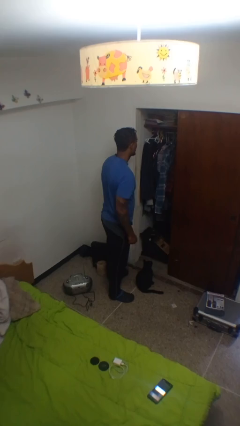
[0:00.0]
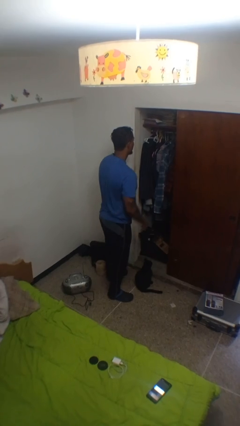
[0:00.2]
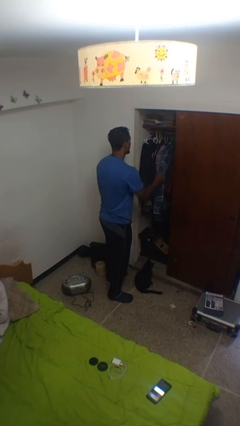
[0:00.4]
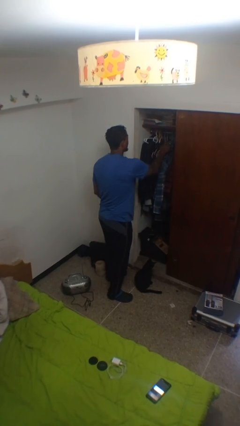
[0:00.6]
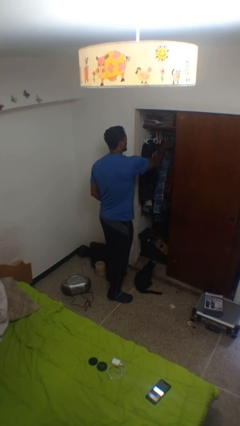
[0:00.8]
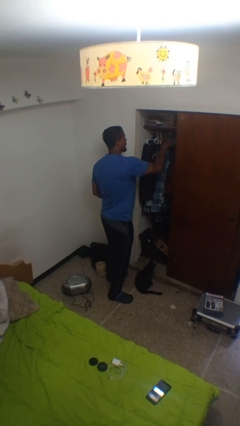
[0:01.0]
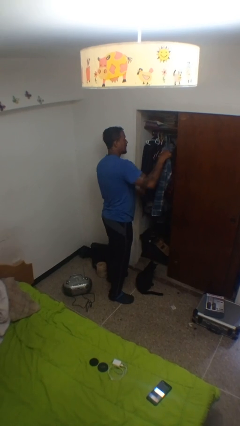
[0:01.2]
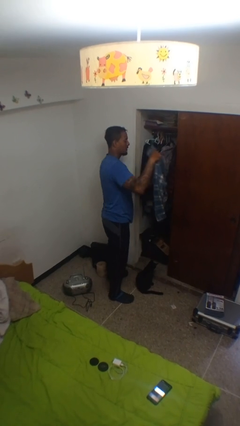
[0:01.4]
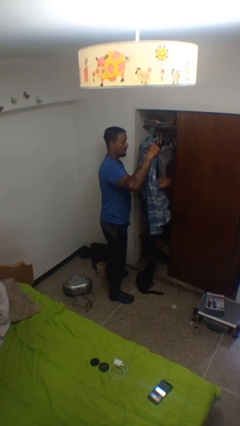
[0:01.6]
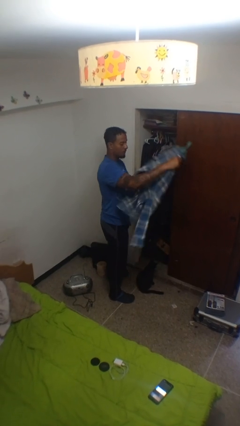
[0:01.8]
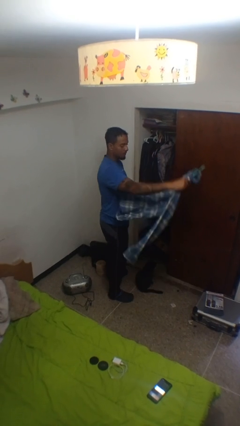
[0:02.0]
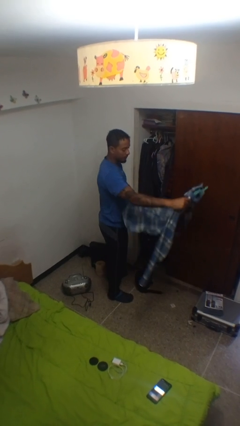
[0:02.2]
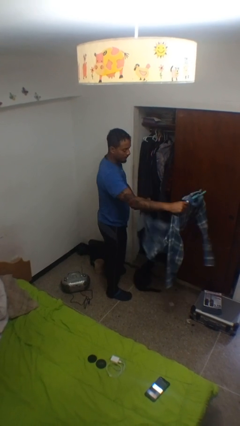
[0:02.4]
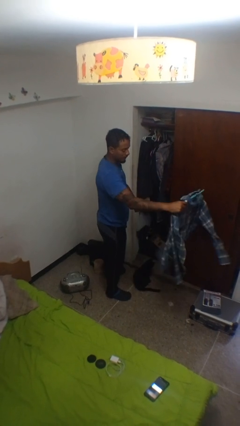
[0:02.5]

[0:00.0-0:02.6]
person takes clothes from closet

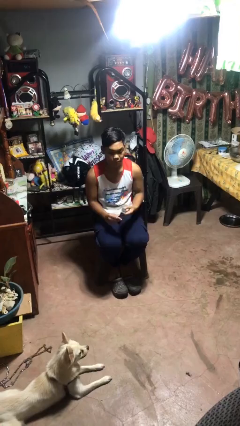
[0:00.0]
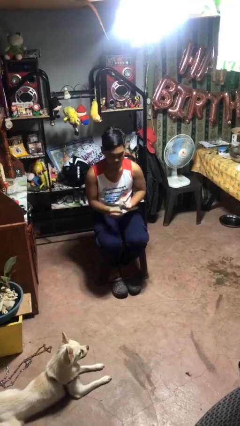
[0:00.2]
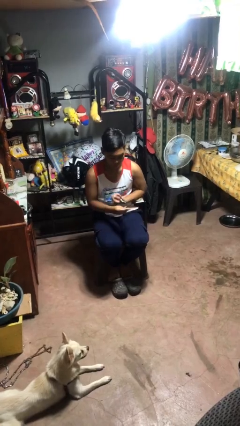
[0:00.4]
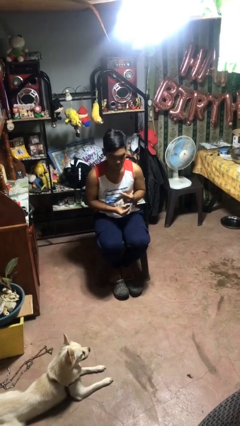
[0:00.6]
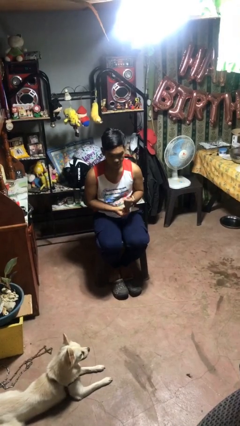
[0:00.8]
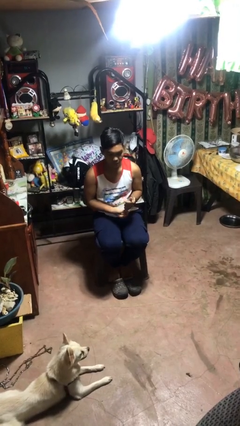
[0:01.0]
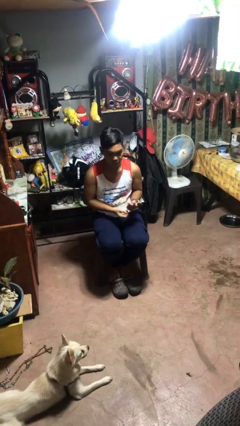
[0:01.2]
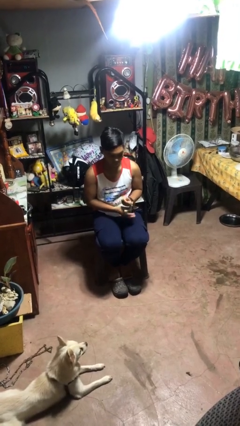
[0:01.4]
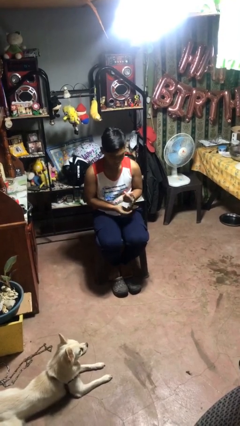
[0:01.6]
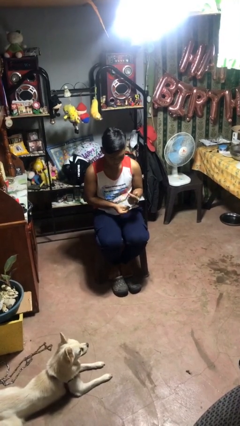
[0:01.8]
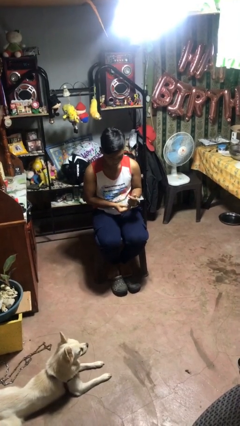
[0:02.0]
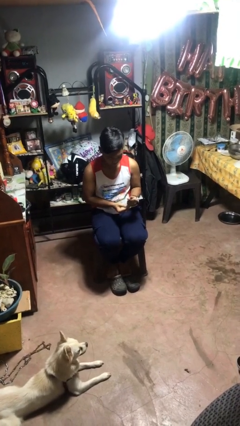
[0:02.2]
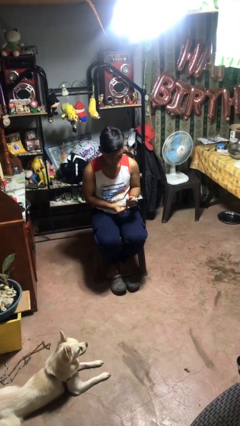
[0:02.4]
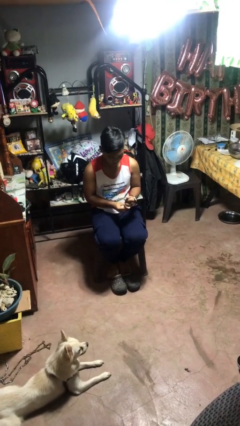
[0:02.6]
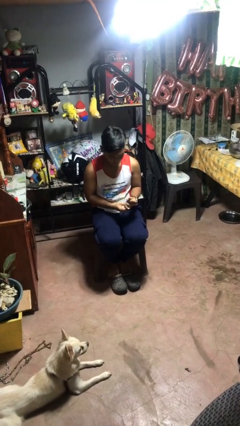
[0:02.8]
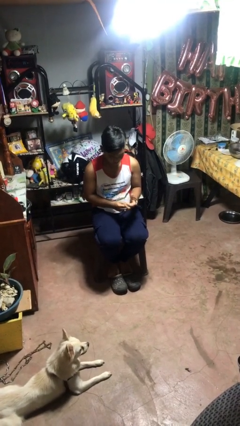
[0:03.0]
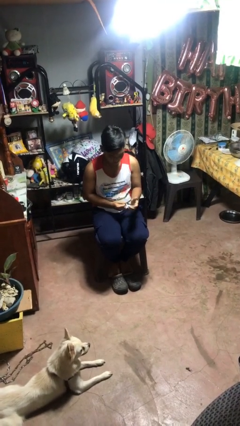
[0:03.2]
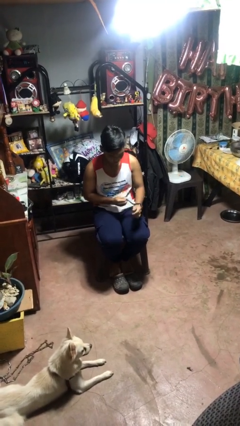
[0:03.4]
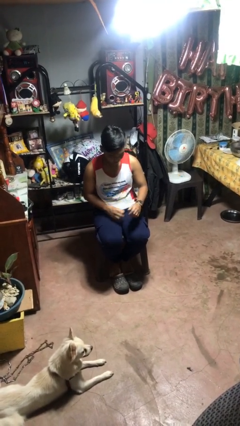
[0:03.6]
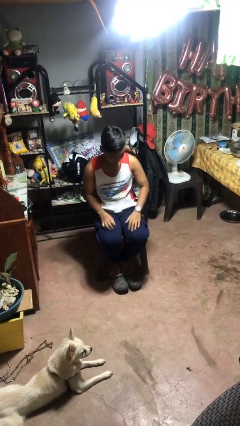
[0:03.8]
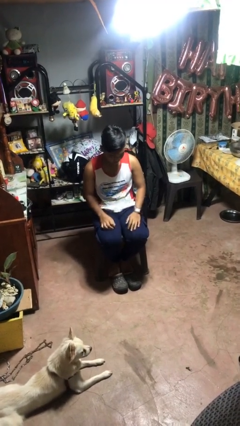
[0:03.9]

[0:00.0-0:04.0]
person puts on wristwatch

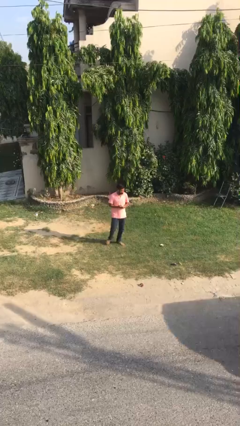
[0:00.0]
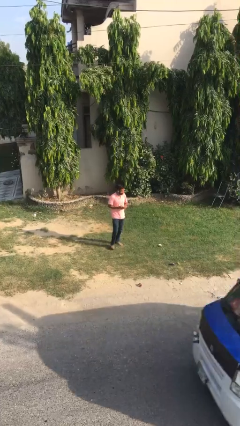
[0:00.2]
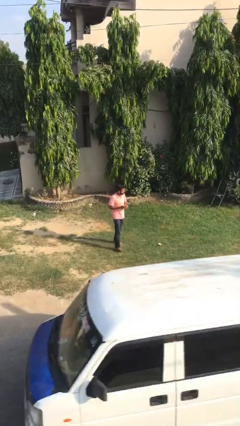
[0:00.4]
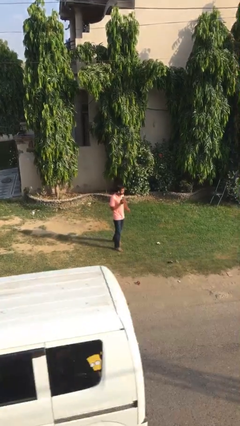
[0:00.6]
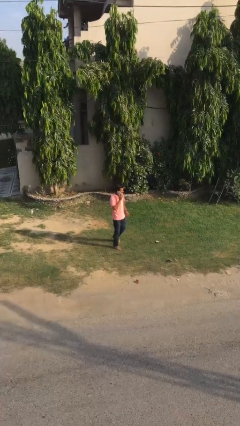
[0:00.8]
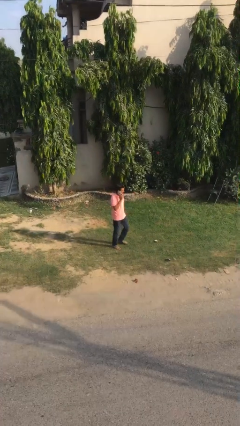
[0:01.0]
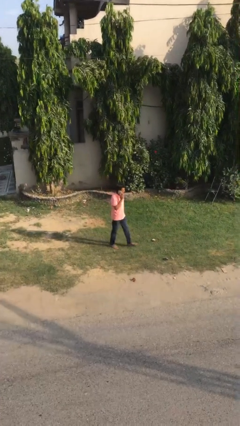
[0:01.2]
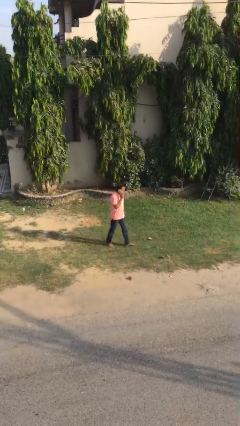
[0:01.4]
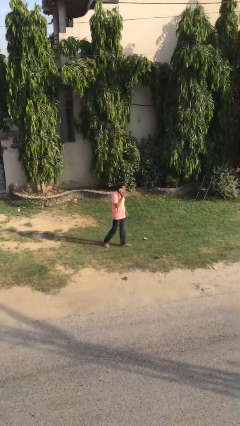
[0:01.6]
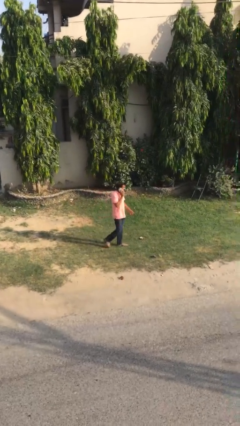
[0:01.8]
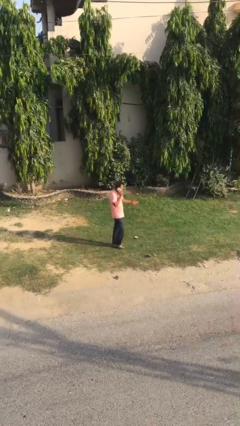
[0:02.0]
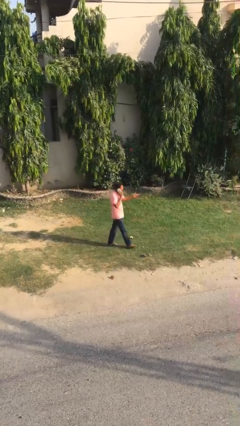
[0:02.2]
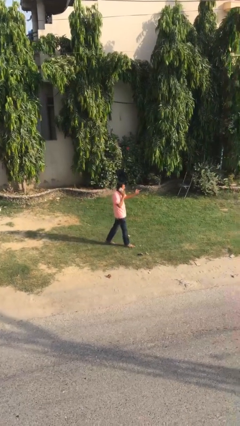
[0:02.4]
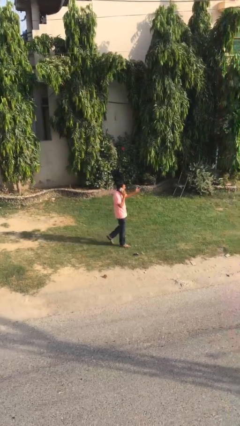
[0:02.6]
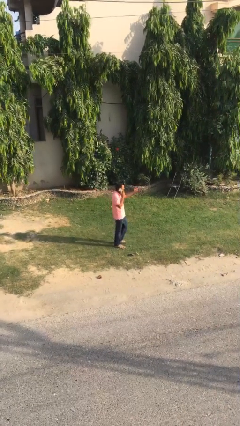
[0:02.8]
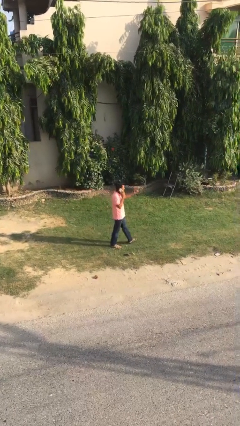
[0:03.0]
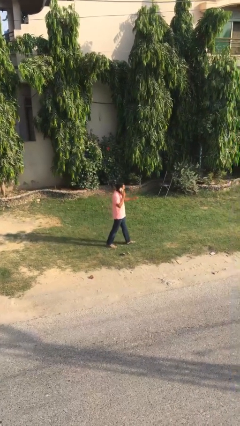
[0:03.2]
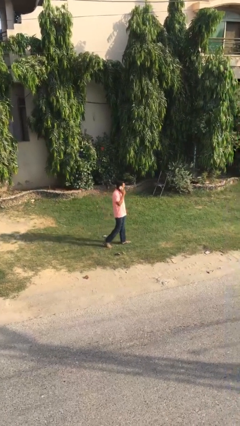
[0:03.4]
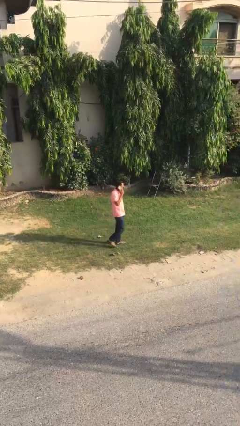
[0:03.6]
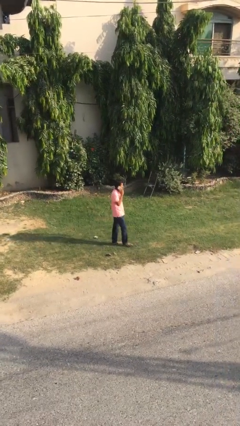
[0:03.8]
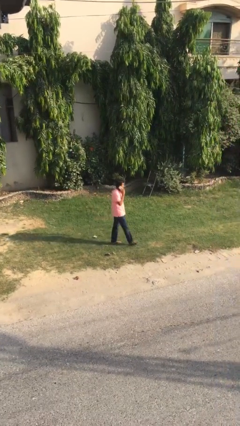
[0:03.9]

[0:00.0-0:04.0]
person talks on phone

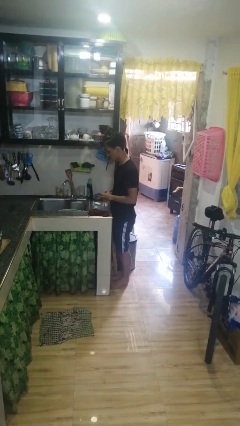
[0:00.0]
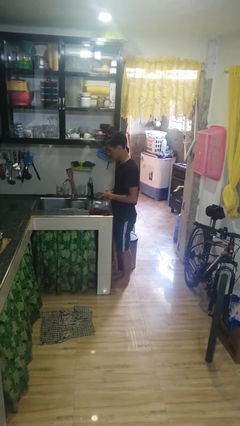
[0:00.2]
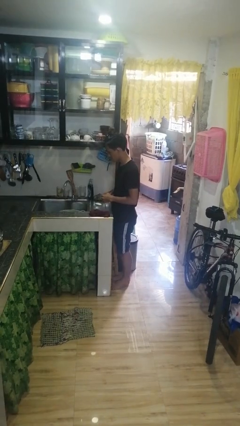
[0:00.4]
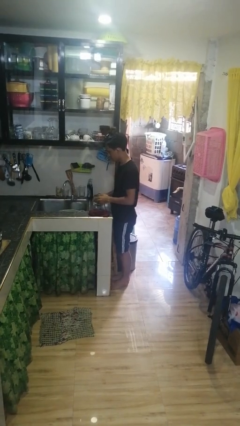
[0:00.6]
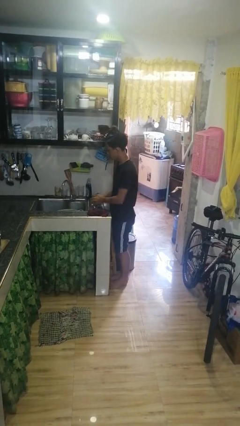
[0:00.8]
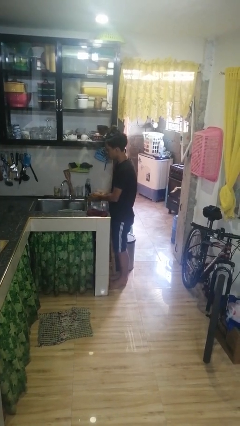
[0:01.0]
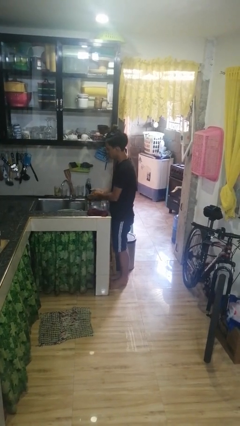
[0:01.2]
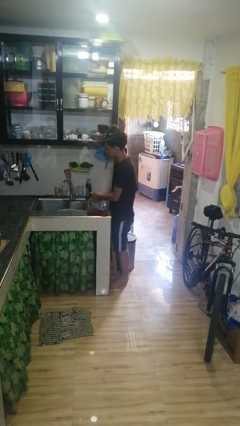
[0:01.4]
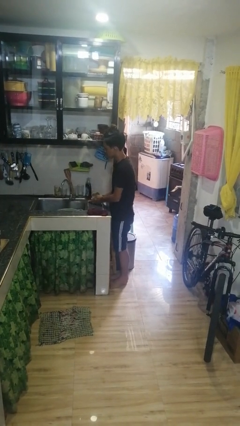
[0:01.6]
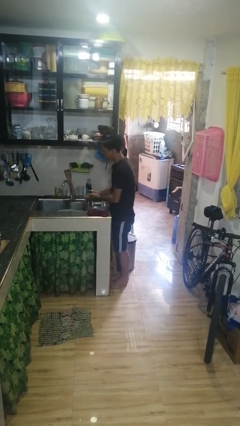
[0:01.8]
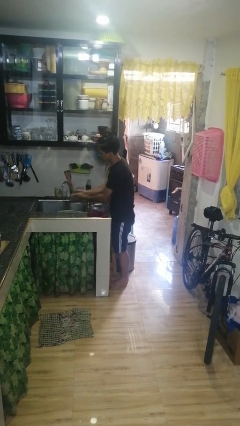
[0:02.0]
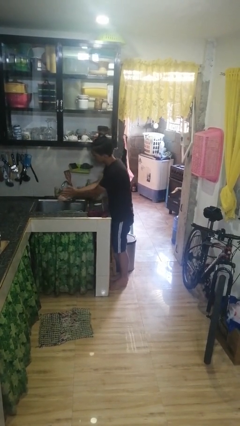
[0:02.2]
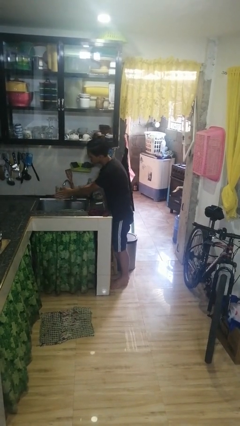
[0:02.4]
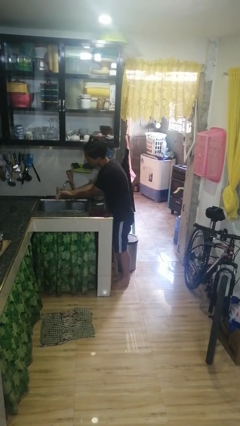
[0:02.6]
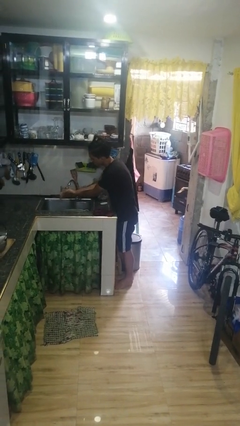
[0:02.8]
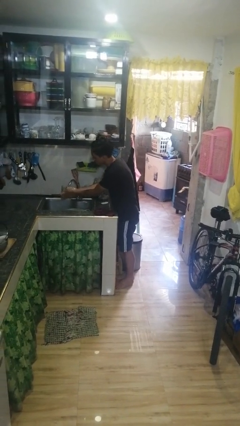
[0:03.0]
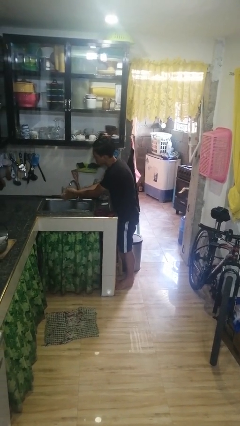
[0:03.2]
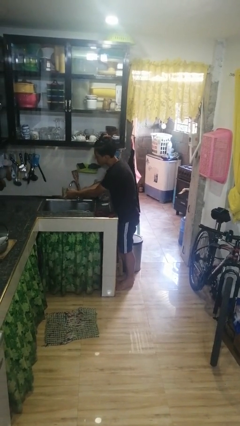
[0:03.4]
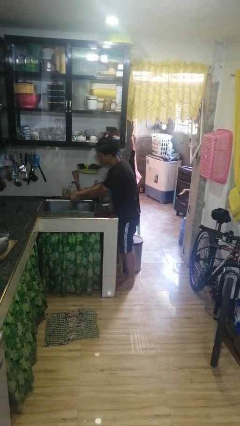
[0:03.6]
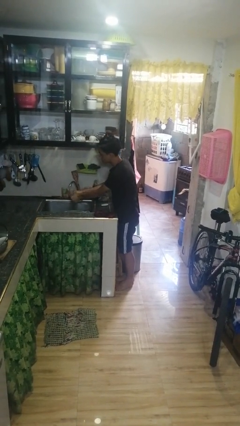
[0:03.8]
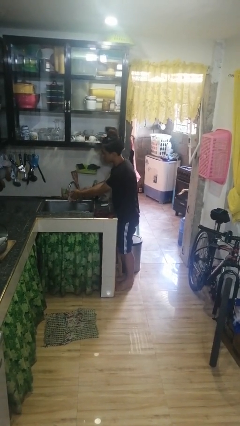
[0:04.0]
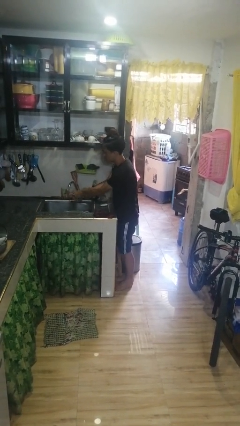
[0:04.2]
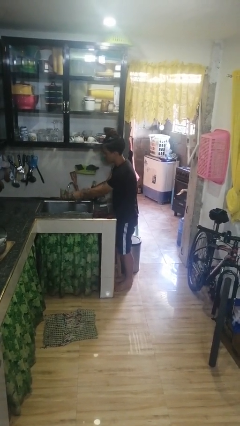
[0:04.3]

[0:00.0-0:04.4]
person washes hands

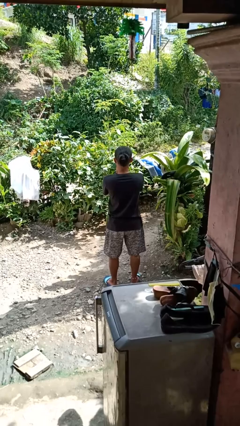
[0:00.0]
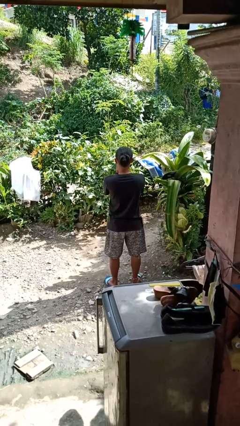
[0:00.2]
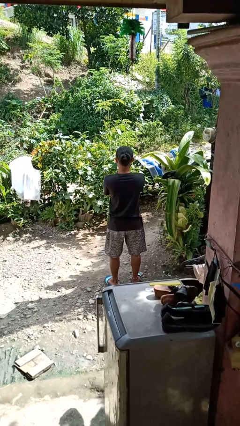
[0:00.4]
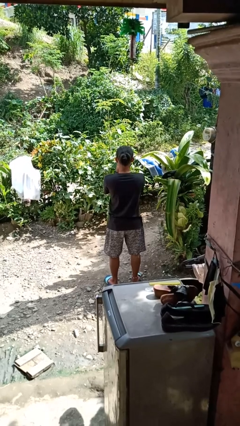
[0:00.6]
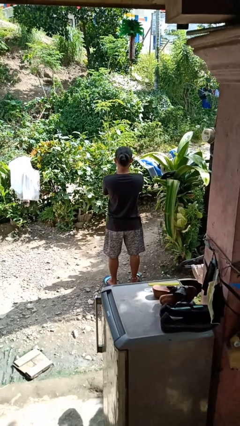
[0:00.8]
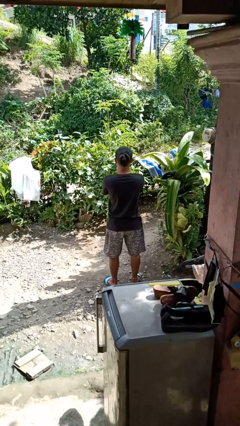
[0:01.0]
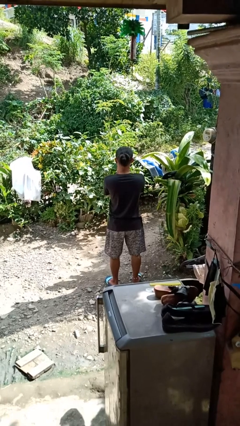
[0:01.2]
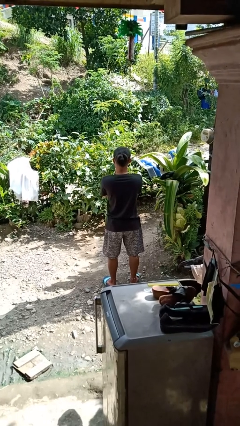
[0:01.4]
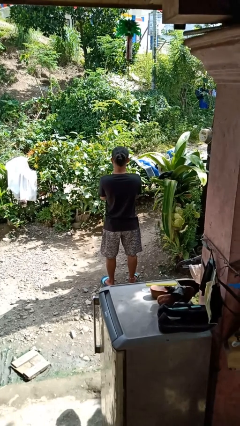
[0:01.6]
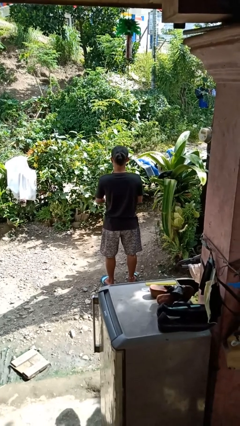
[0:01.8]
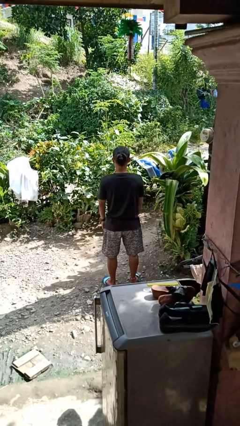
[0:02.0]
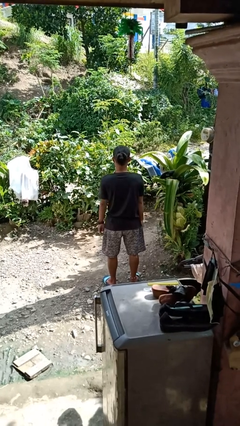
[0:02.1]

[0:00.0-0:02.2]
person blows into hands

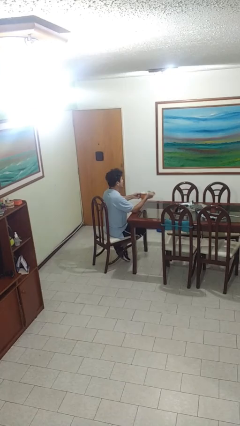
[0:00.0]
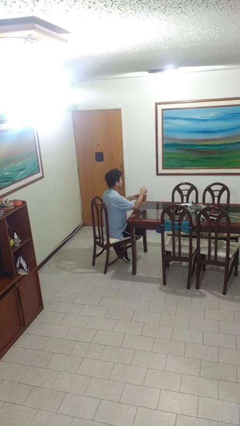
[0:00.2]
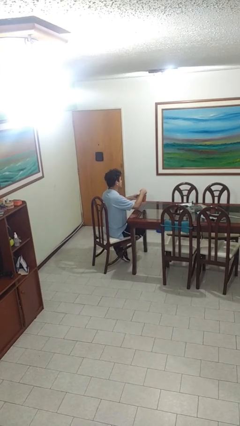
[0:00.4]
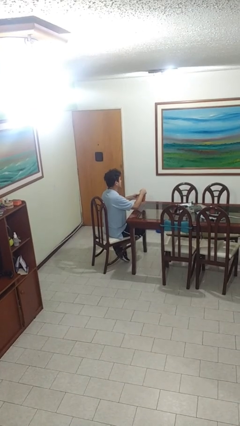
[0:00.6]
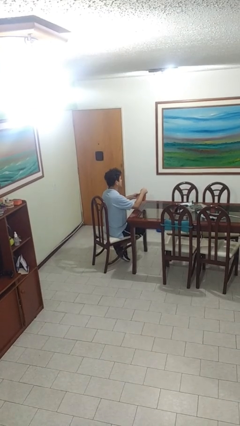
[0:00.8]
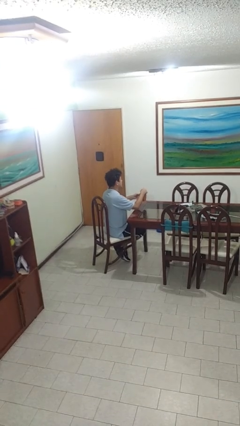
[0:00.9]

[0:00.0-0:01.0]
person stirs mug
